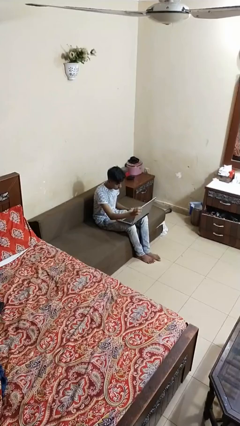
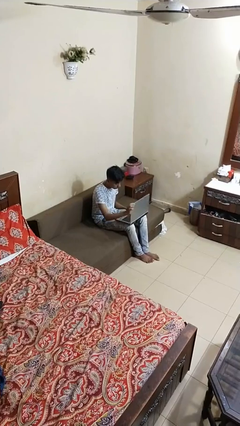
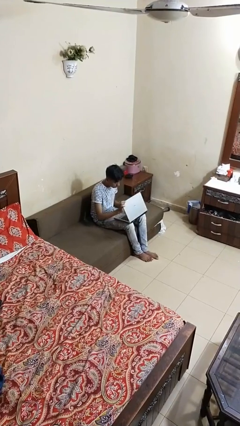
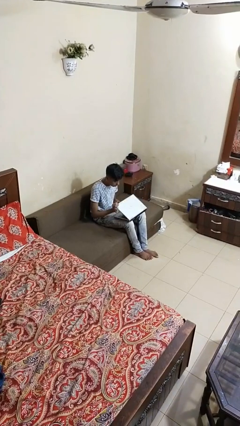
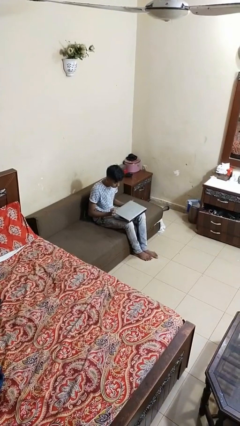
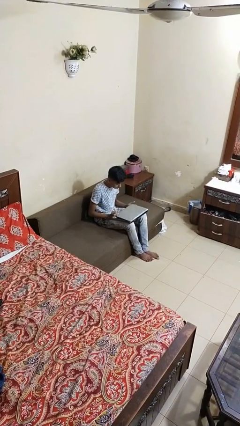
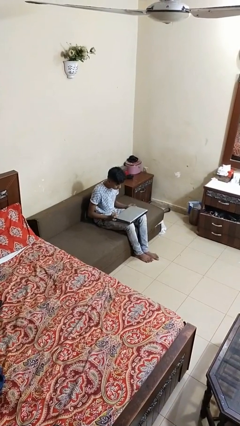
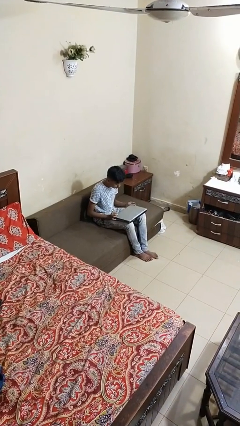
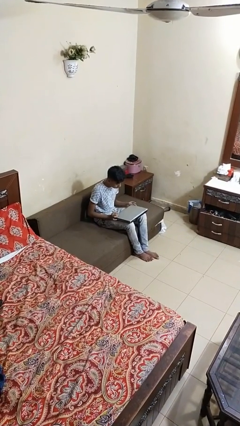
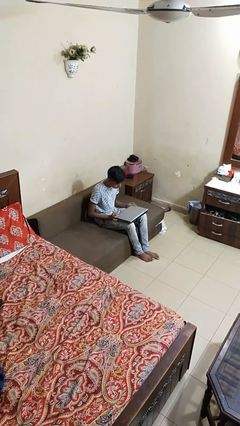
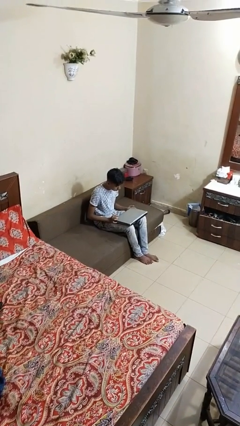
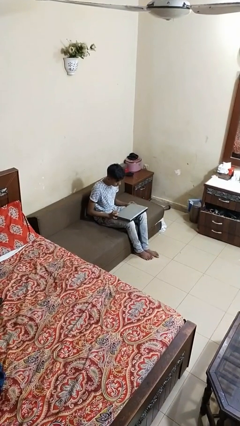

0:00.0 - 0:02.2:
person closes laptop

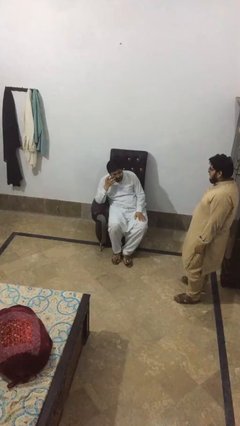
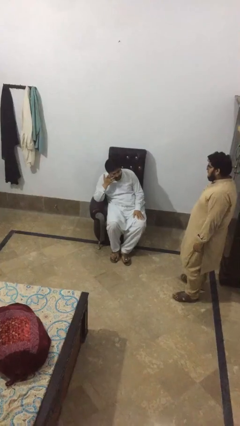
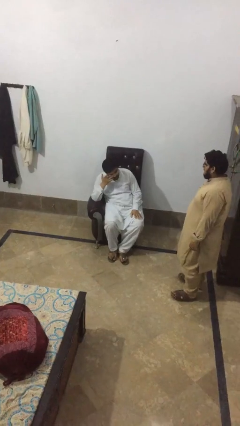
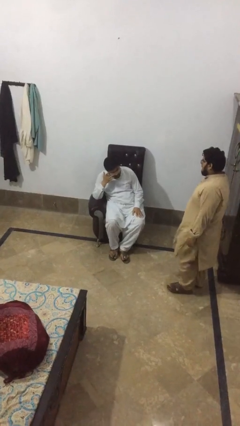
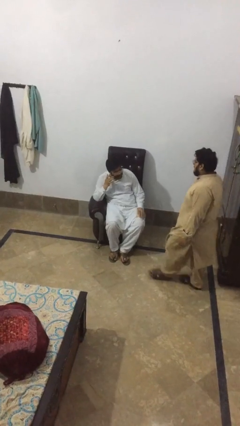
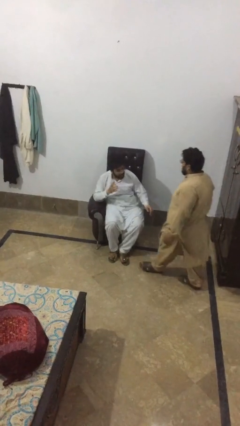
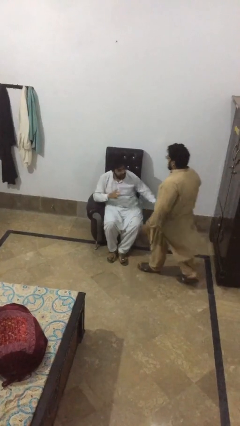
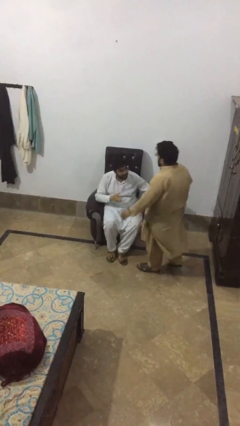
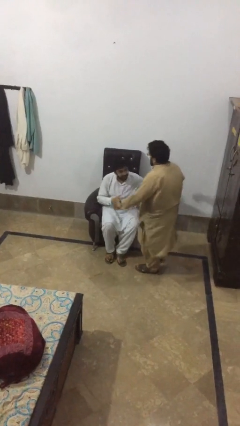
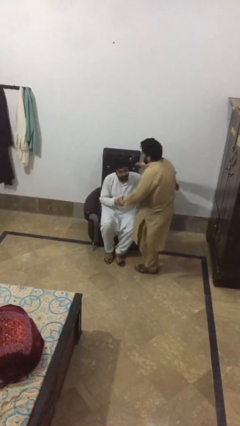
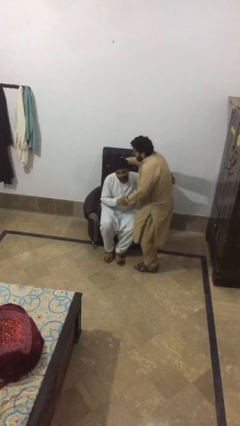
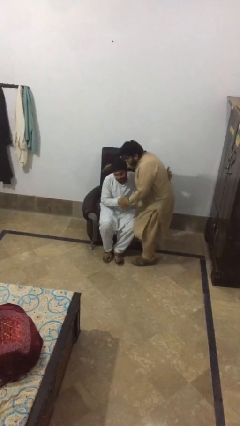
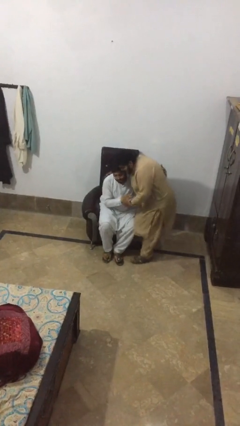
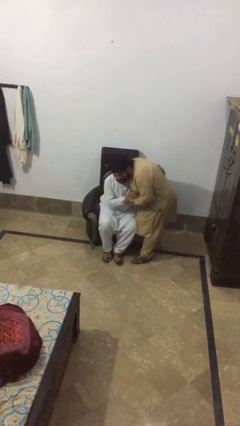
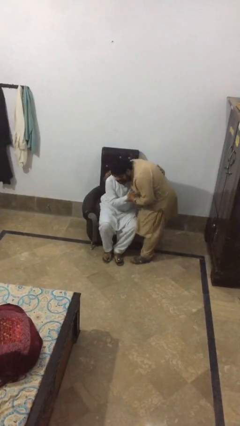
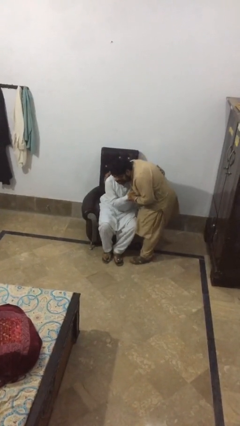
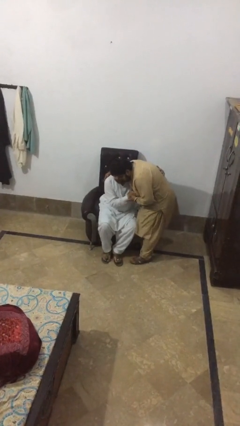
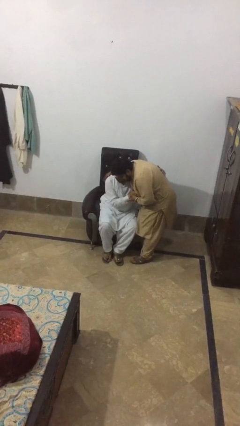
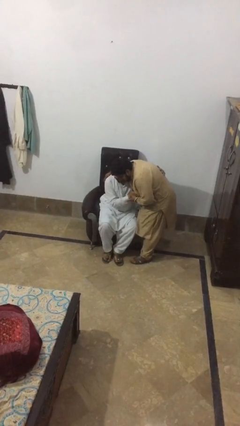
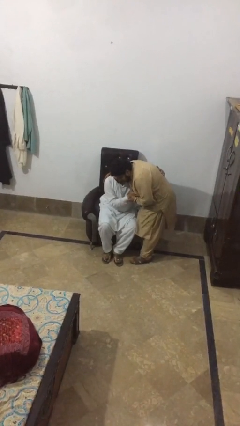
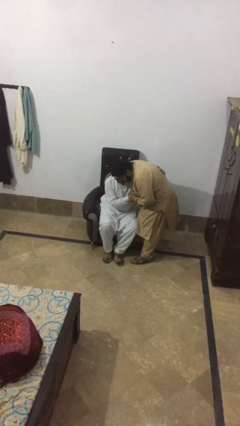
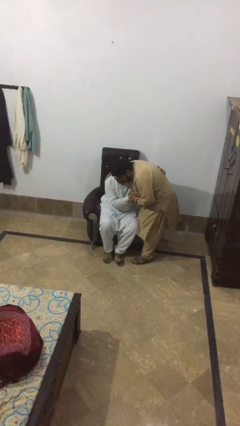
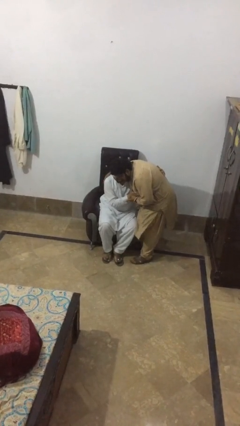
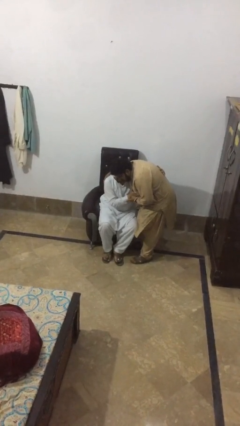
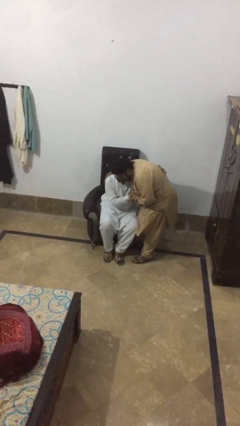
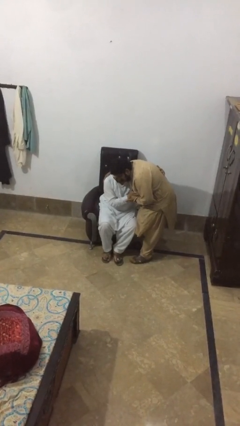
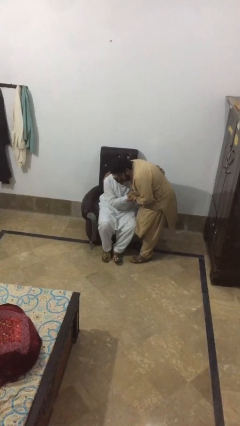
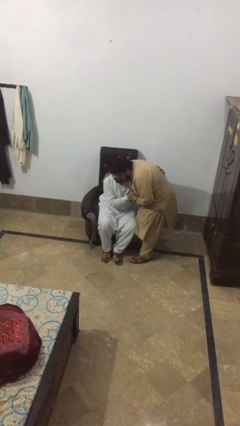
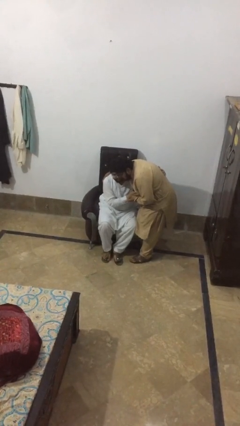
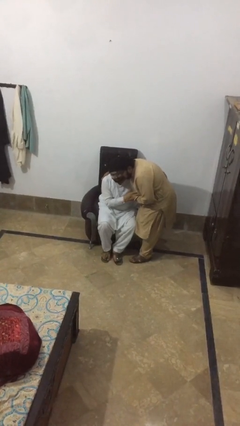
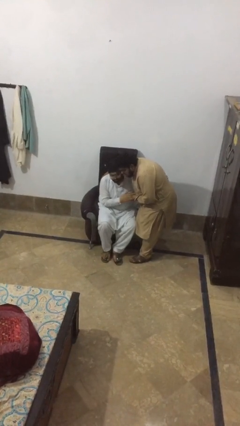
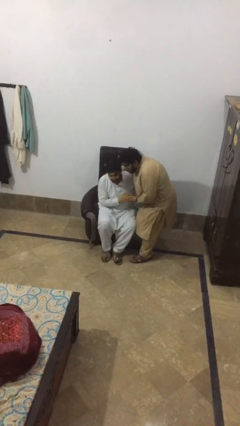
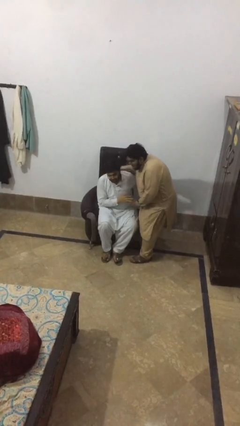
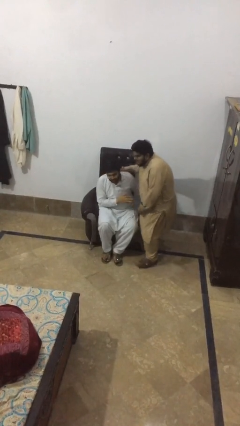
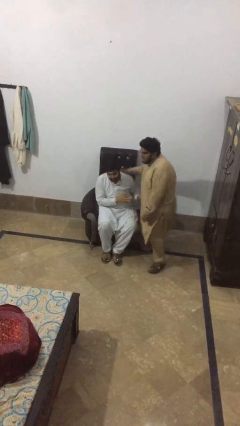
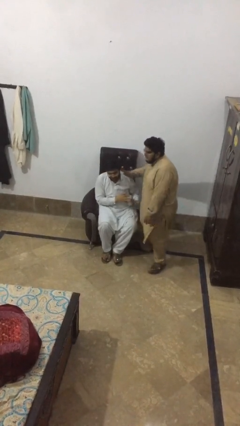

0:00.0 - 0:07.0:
person embraces person

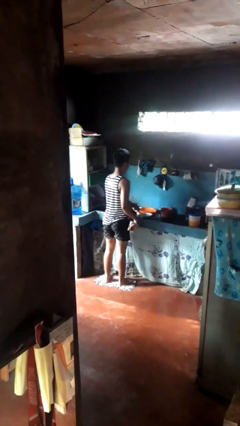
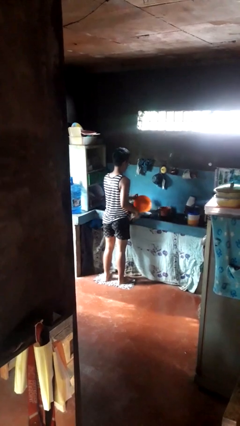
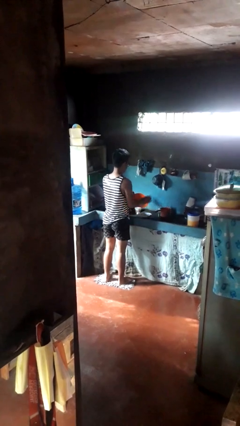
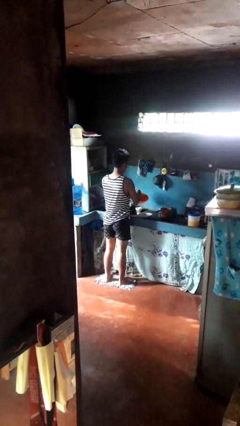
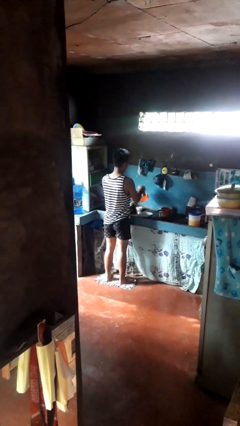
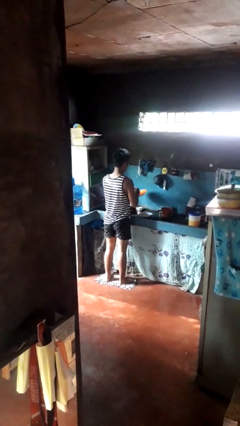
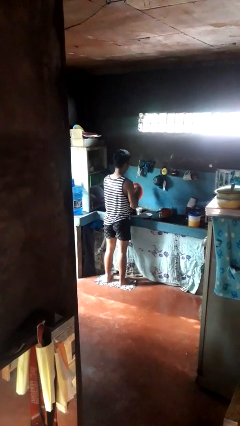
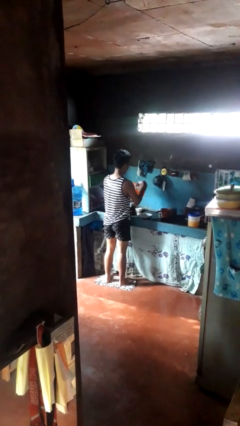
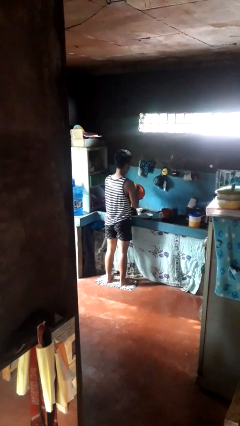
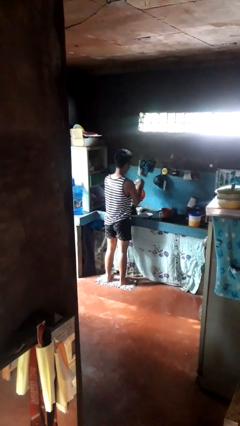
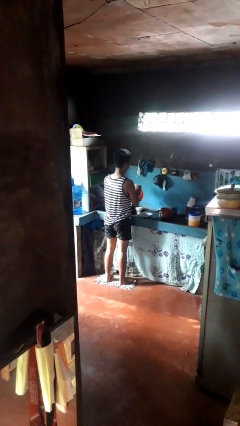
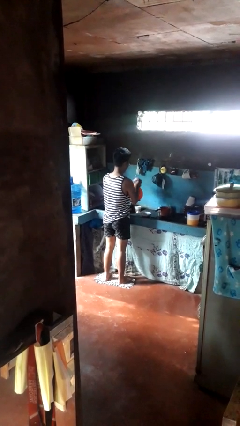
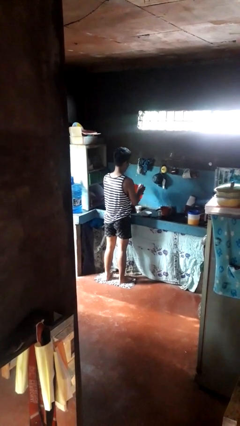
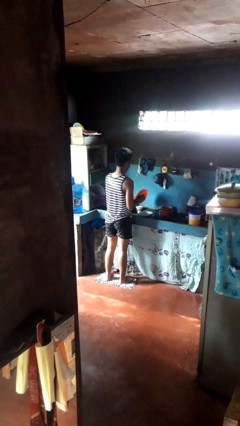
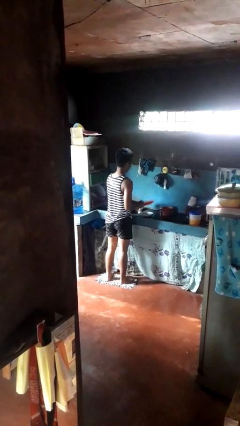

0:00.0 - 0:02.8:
person dries dish

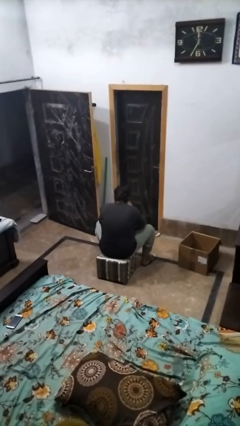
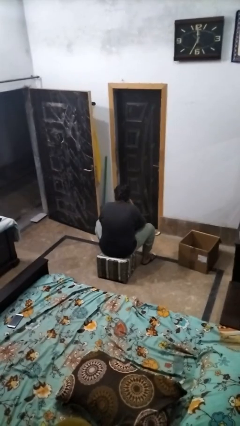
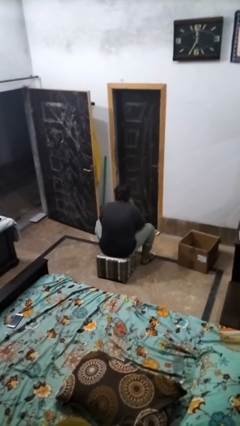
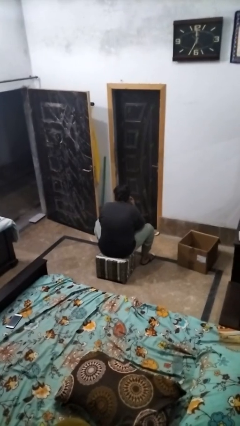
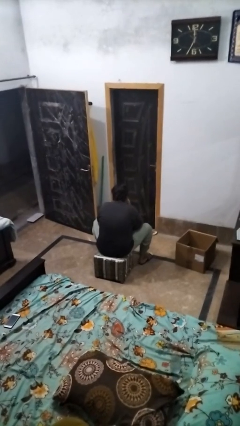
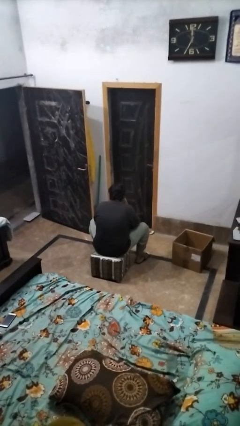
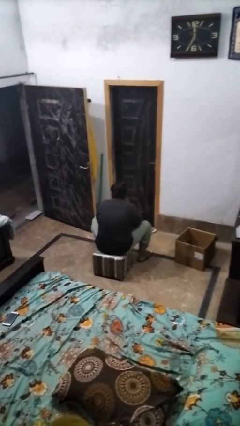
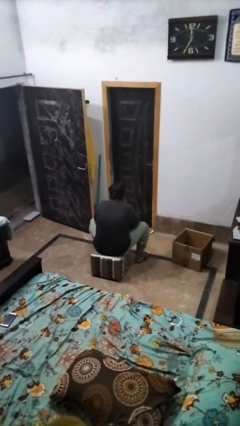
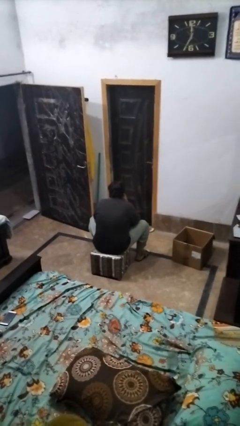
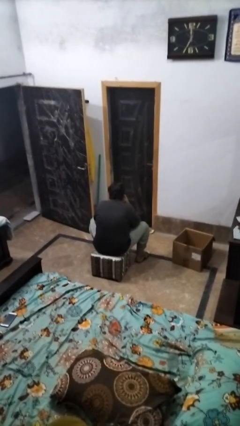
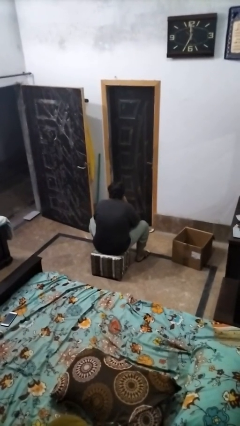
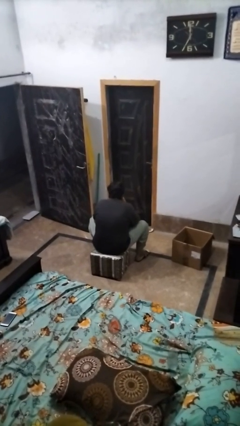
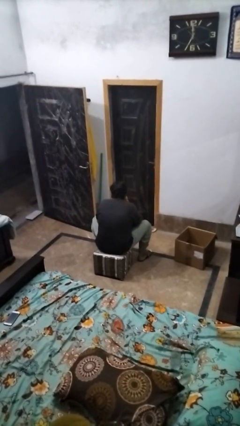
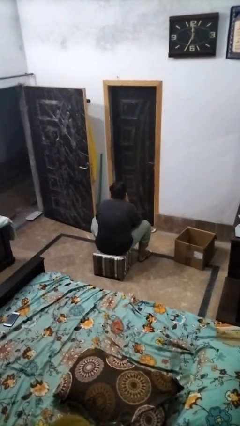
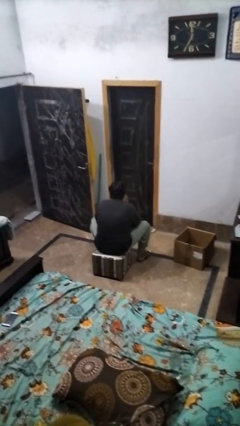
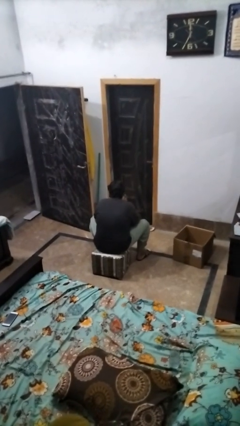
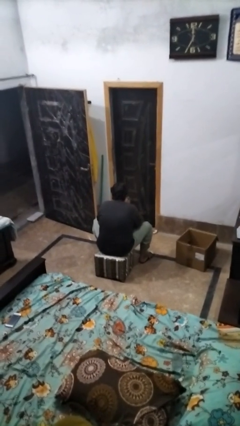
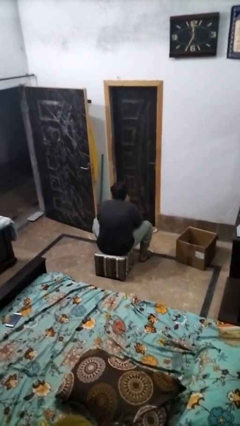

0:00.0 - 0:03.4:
person strokes chin

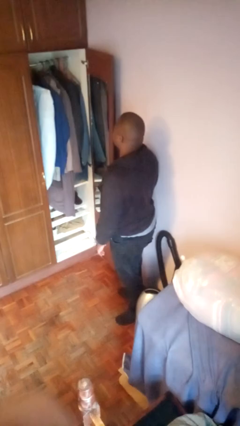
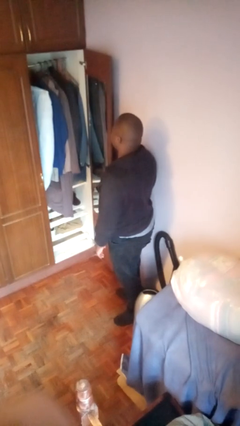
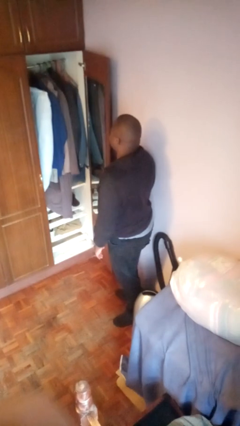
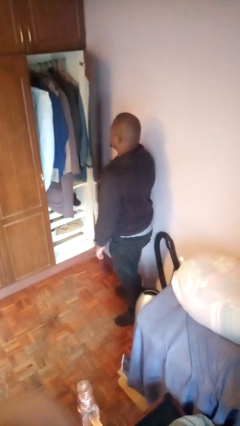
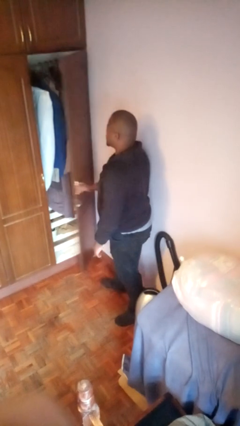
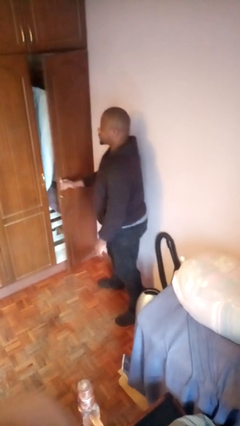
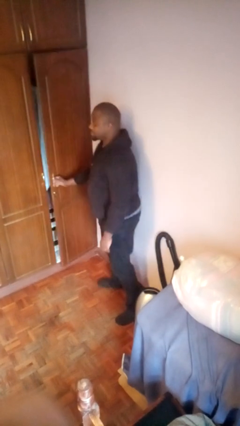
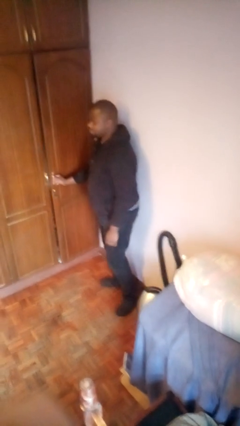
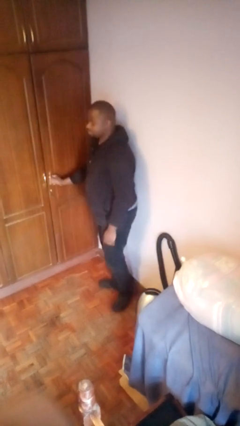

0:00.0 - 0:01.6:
person closes closet door
